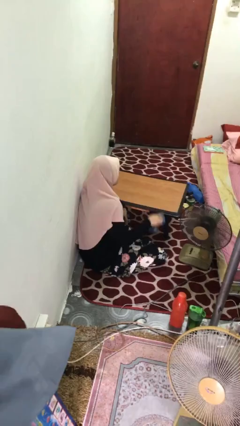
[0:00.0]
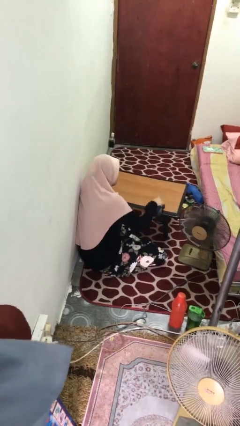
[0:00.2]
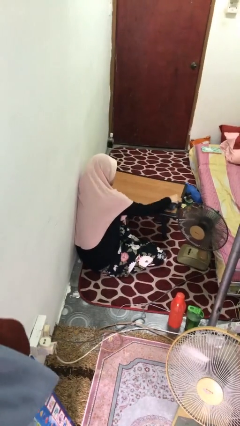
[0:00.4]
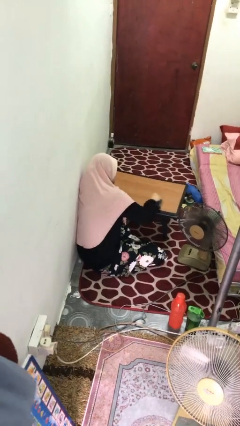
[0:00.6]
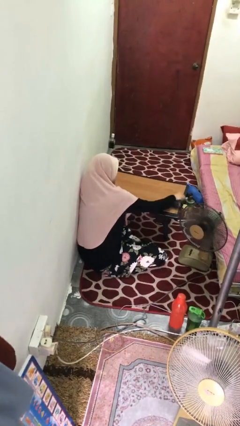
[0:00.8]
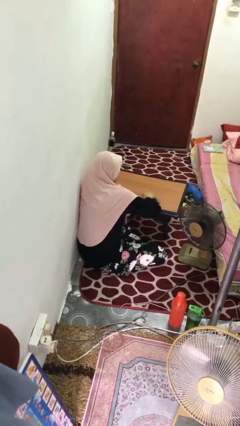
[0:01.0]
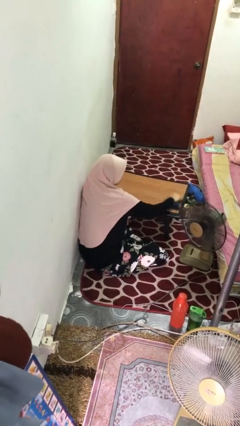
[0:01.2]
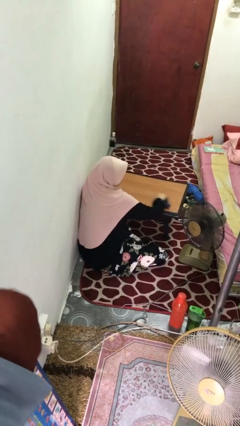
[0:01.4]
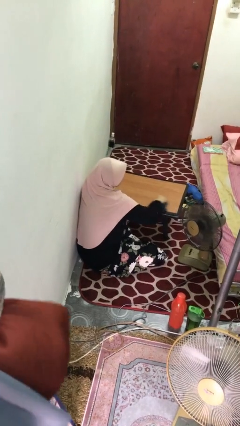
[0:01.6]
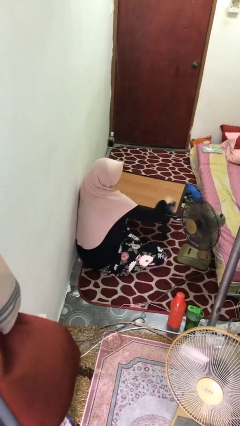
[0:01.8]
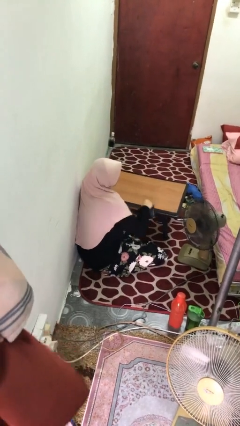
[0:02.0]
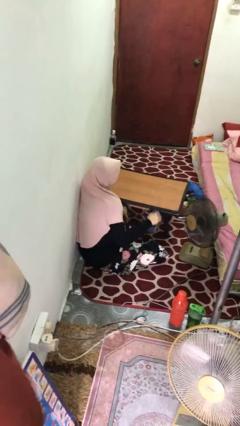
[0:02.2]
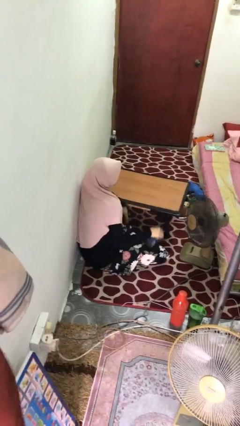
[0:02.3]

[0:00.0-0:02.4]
person cleans table with rag

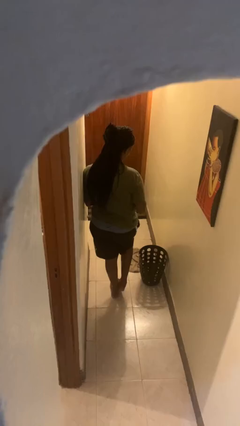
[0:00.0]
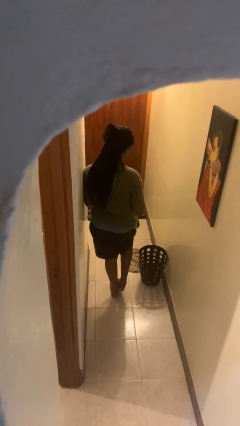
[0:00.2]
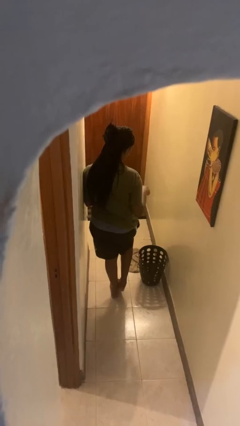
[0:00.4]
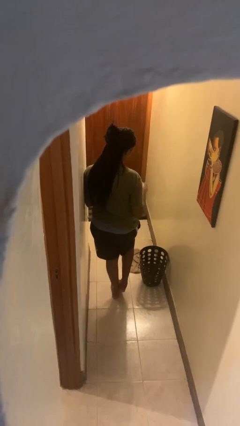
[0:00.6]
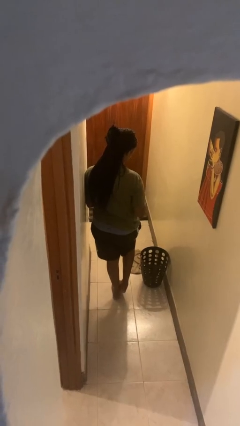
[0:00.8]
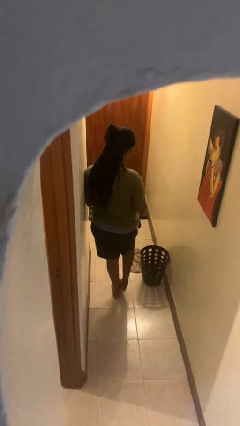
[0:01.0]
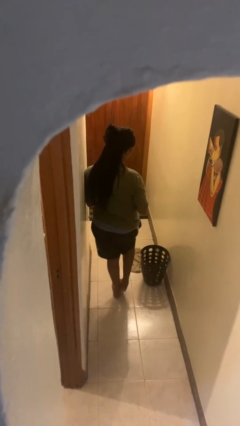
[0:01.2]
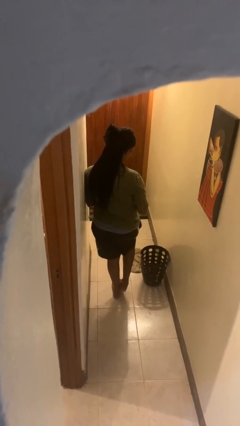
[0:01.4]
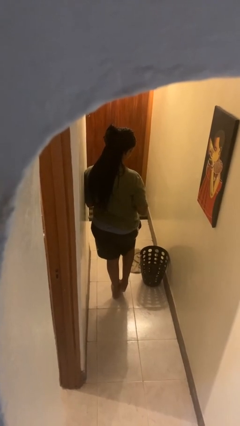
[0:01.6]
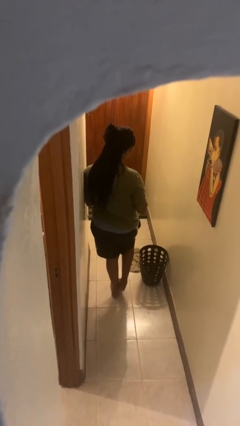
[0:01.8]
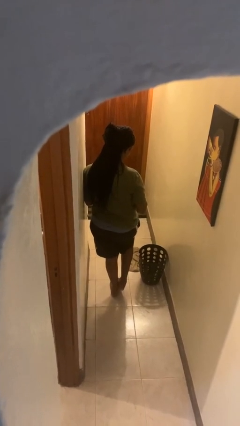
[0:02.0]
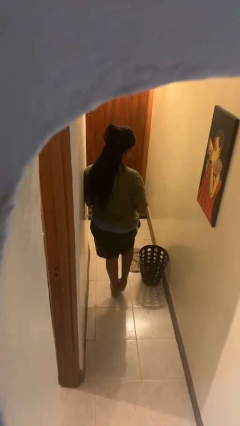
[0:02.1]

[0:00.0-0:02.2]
person discards trash

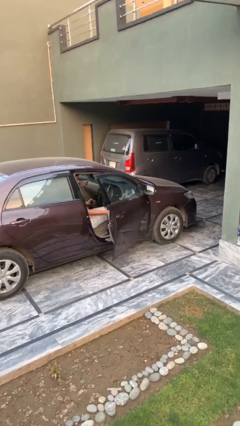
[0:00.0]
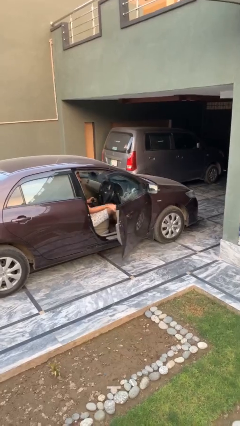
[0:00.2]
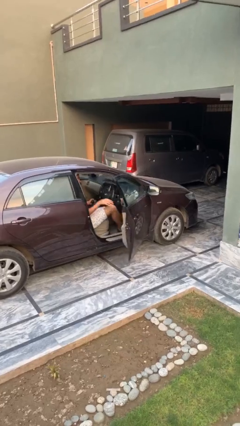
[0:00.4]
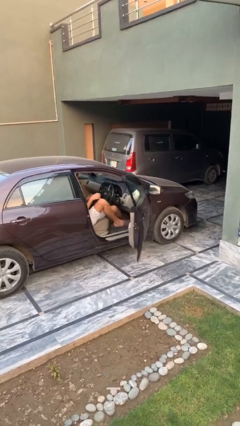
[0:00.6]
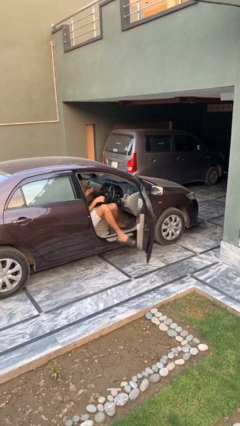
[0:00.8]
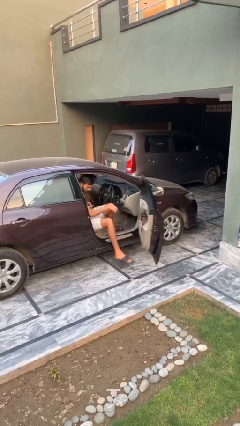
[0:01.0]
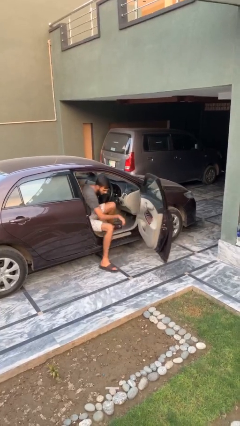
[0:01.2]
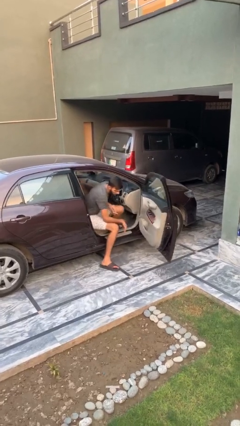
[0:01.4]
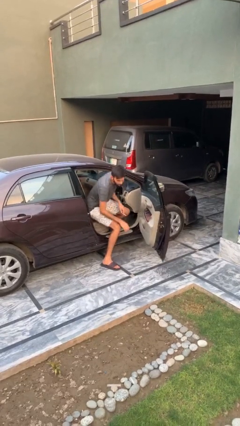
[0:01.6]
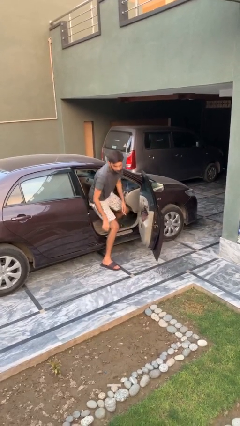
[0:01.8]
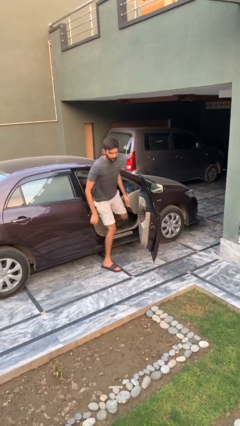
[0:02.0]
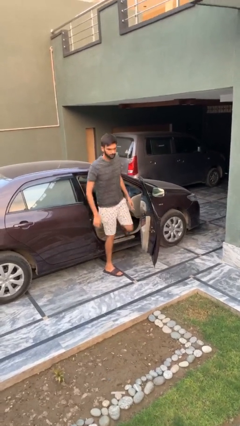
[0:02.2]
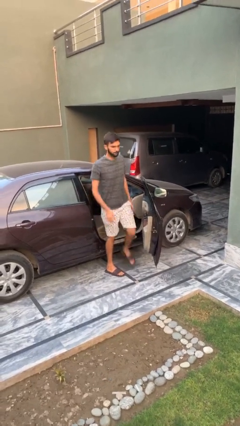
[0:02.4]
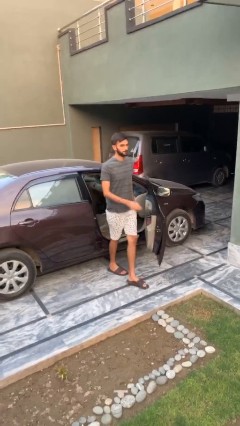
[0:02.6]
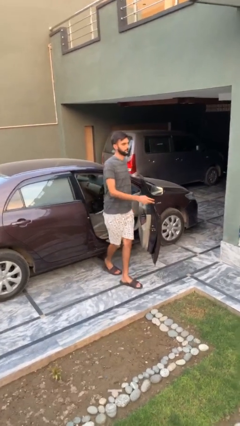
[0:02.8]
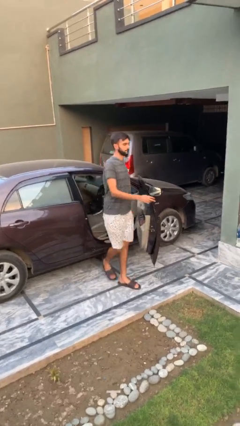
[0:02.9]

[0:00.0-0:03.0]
person exits car

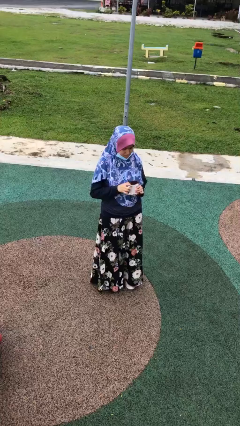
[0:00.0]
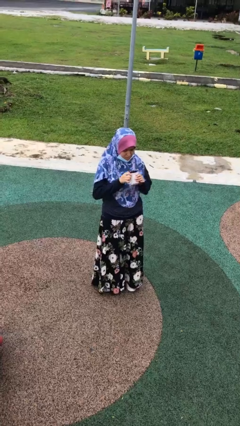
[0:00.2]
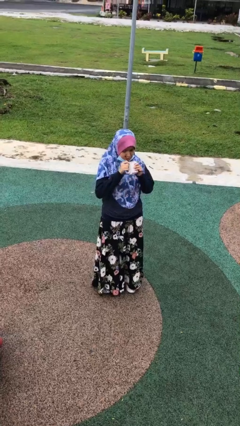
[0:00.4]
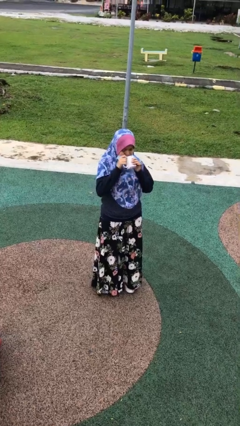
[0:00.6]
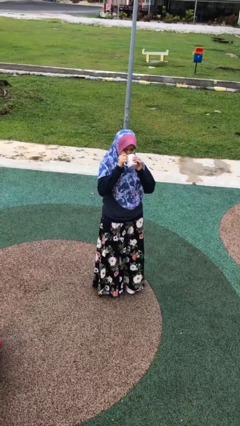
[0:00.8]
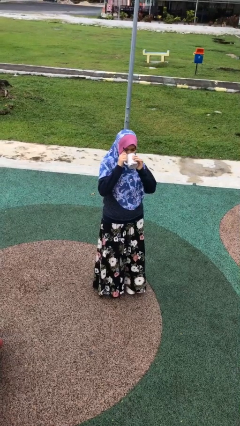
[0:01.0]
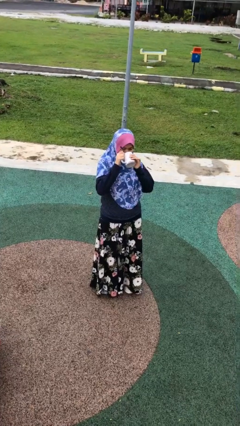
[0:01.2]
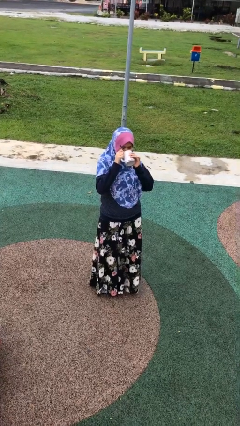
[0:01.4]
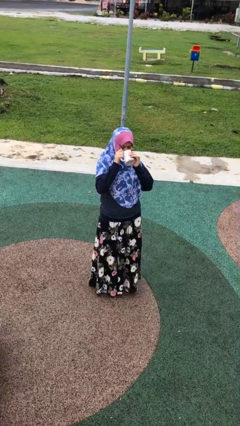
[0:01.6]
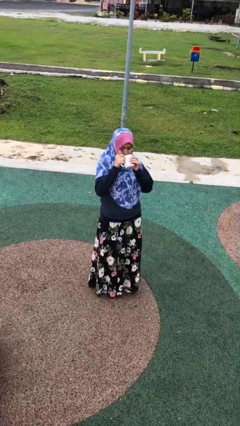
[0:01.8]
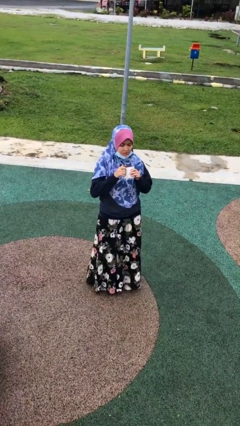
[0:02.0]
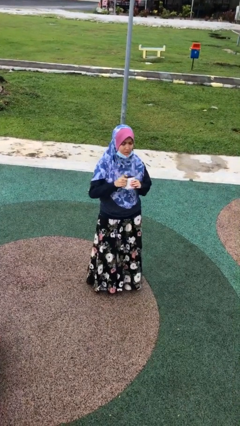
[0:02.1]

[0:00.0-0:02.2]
person drinks from mug

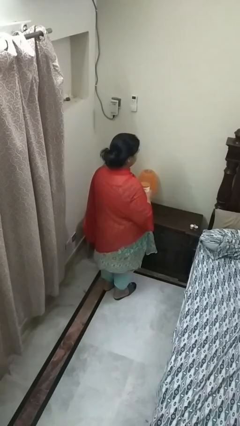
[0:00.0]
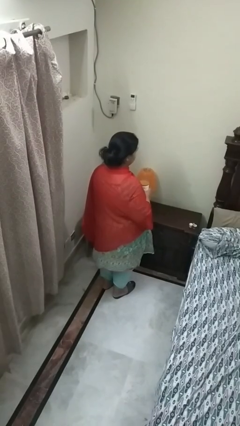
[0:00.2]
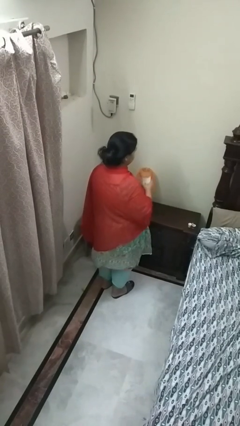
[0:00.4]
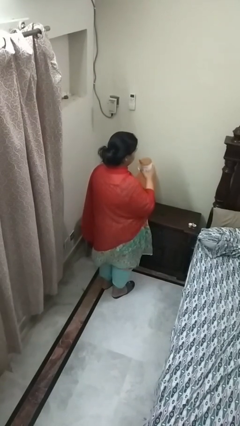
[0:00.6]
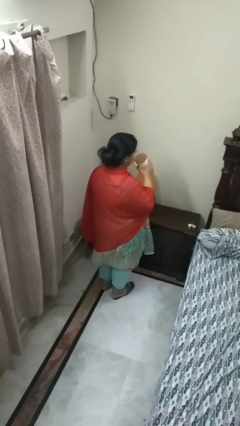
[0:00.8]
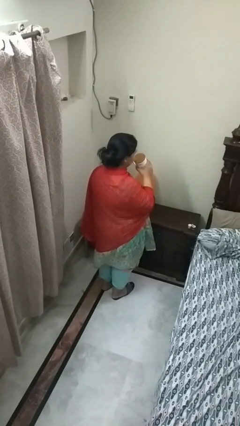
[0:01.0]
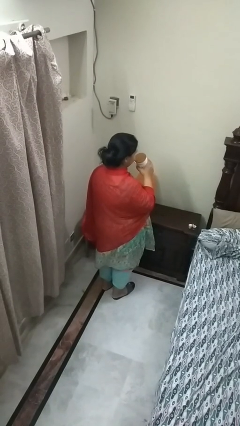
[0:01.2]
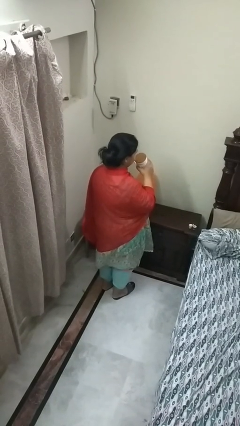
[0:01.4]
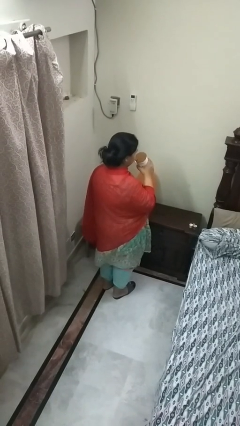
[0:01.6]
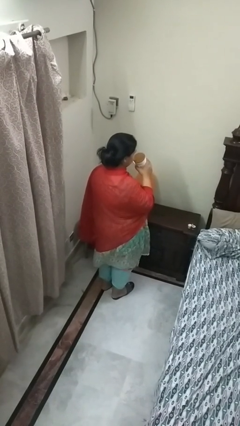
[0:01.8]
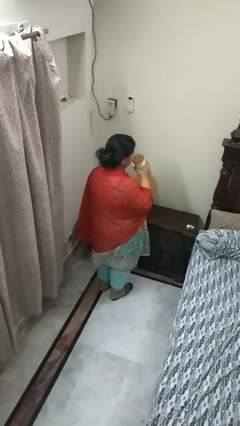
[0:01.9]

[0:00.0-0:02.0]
person drinks from straw

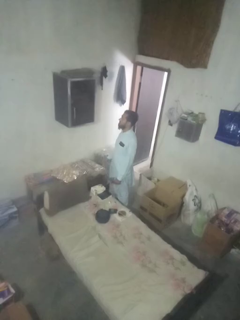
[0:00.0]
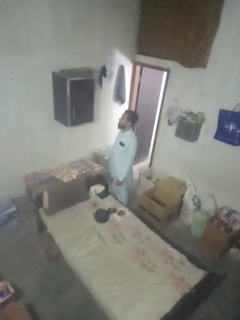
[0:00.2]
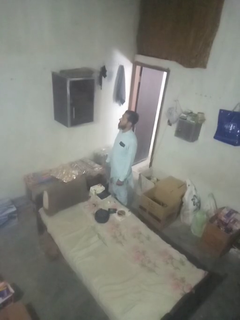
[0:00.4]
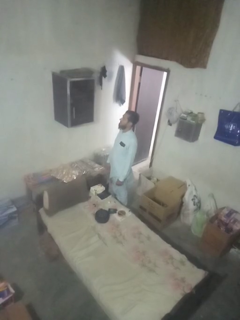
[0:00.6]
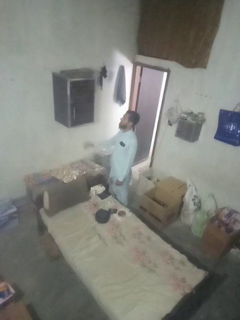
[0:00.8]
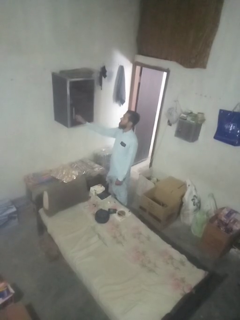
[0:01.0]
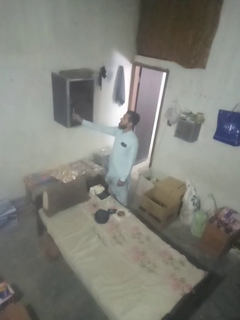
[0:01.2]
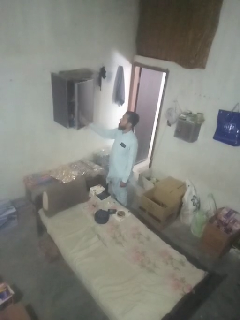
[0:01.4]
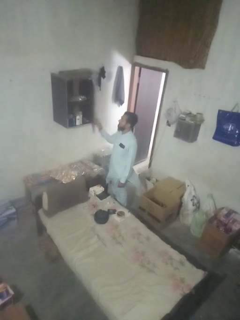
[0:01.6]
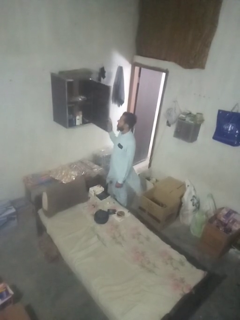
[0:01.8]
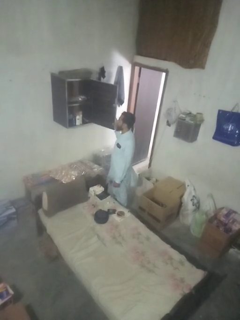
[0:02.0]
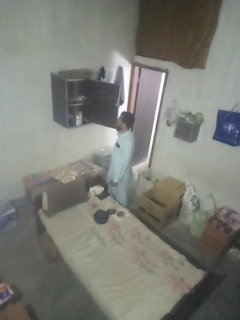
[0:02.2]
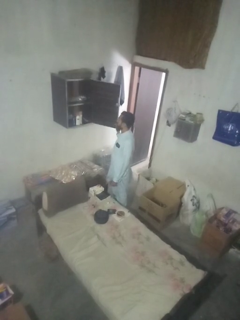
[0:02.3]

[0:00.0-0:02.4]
person opens dresser drawer

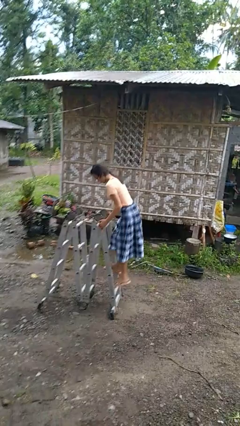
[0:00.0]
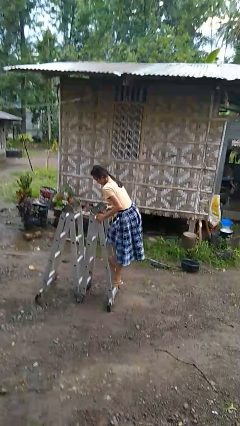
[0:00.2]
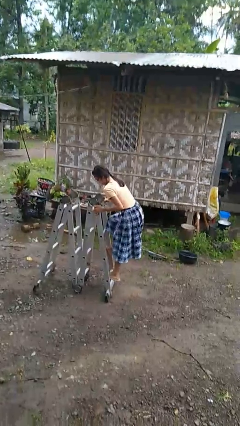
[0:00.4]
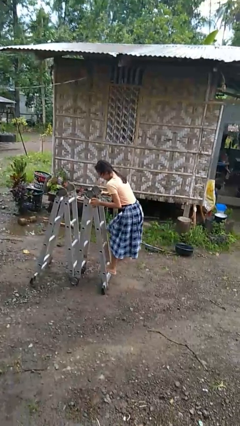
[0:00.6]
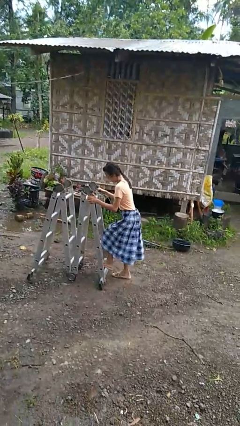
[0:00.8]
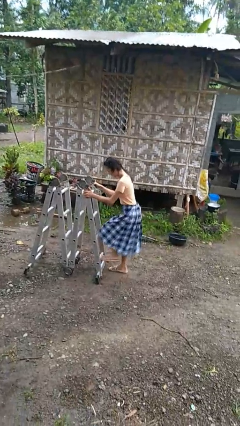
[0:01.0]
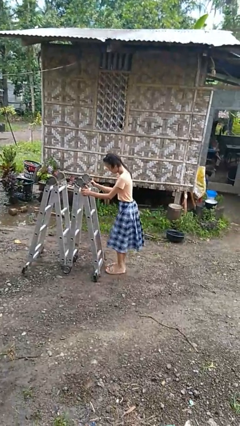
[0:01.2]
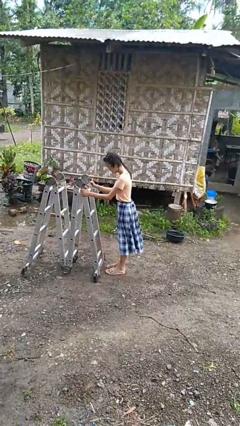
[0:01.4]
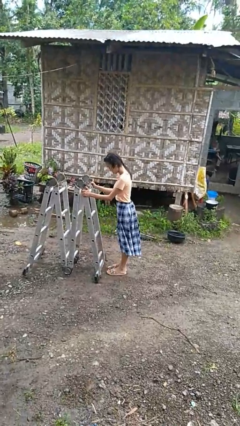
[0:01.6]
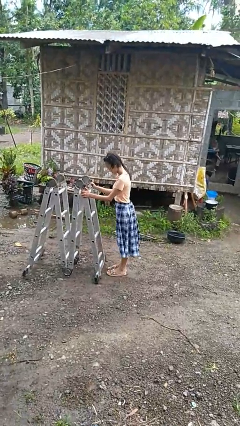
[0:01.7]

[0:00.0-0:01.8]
person climbs down ladder

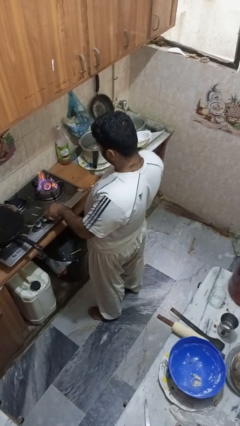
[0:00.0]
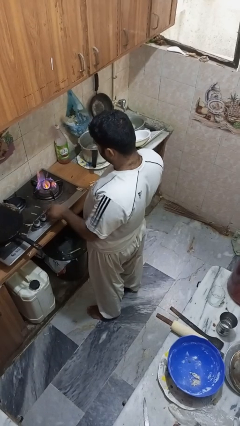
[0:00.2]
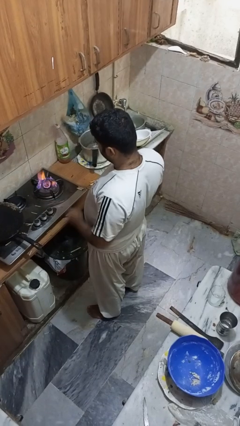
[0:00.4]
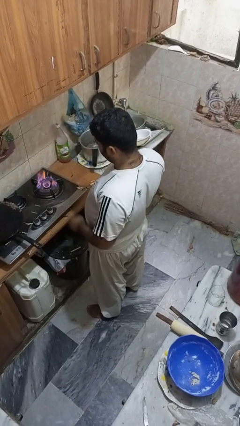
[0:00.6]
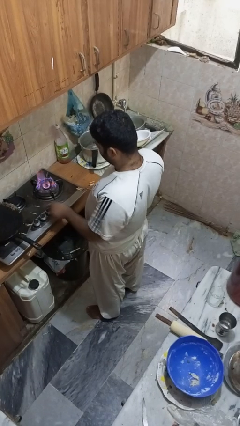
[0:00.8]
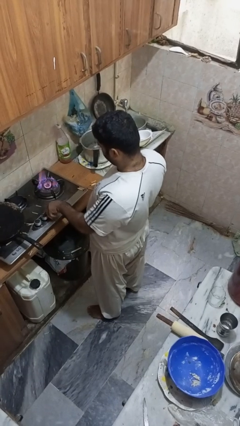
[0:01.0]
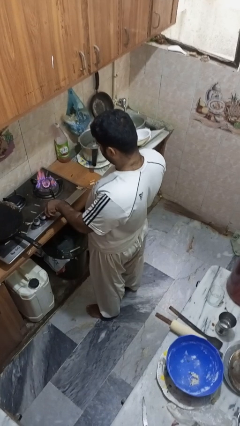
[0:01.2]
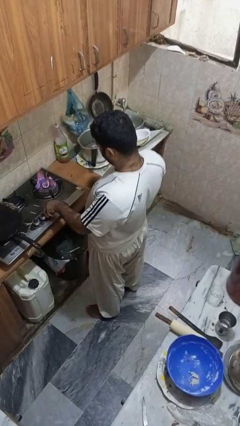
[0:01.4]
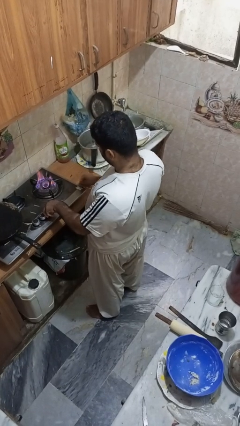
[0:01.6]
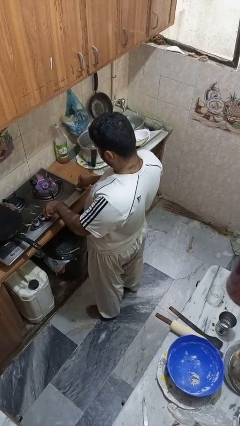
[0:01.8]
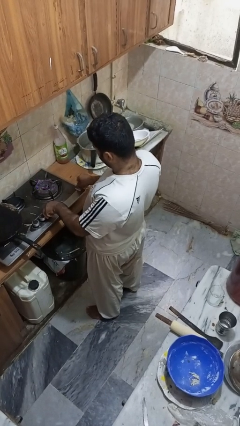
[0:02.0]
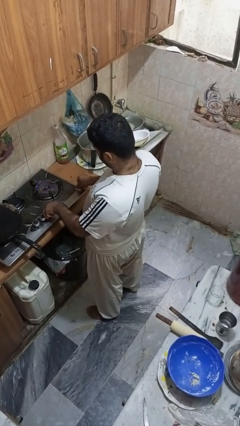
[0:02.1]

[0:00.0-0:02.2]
person turns off stovetop
